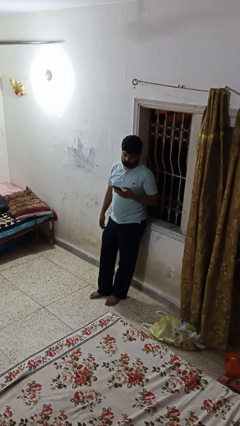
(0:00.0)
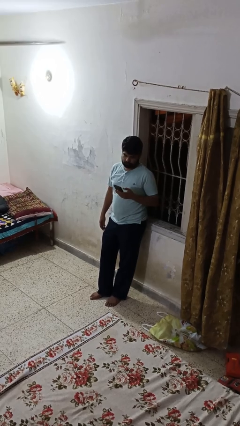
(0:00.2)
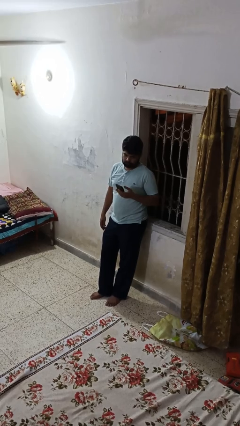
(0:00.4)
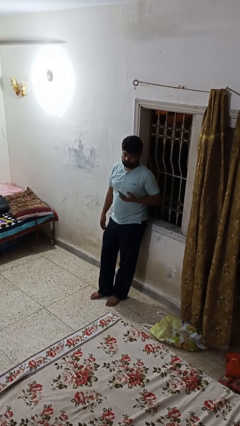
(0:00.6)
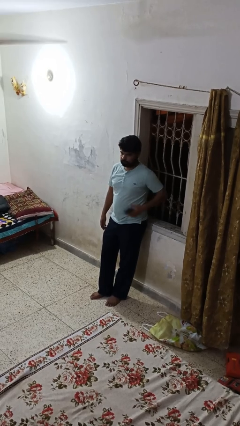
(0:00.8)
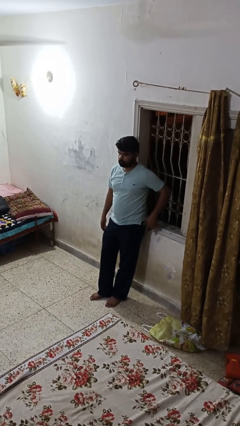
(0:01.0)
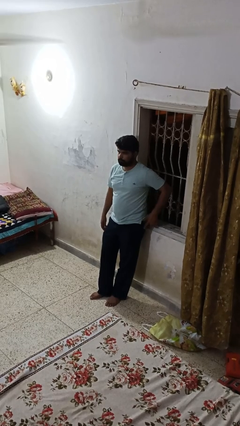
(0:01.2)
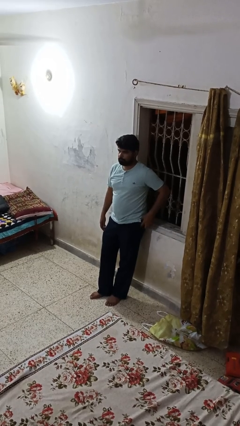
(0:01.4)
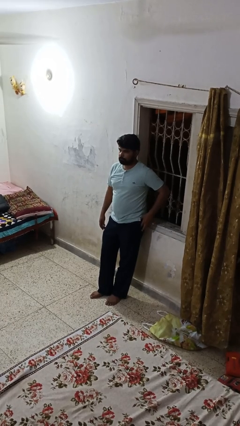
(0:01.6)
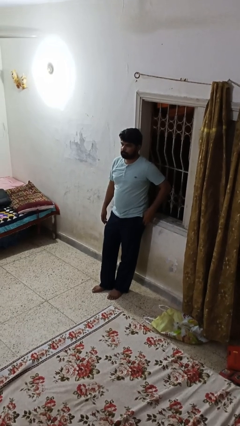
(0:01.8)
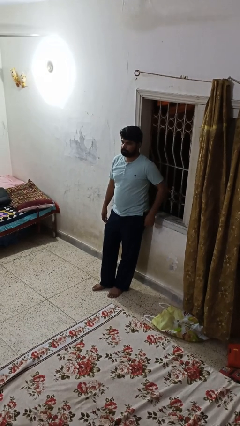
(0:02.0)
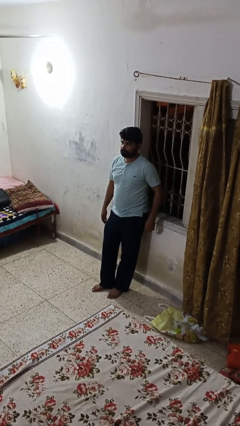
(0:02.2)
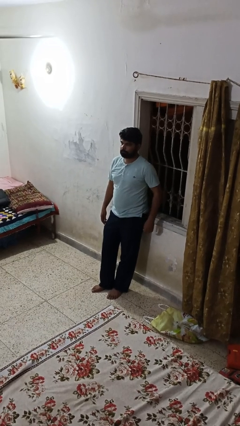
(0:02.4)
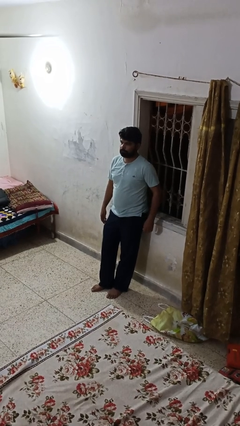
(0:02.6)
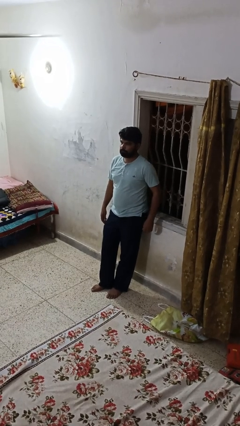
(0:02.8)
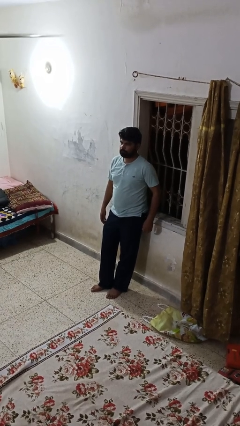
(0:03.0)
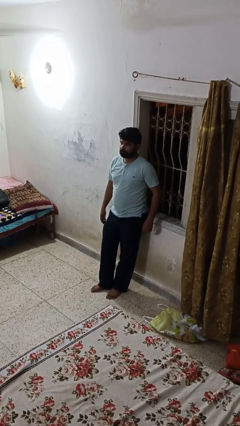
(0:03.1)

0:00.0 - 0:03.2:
person puts phone into pocket

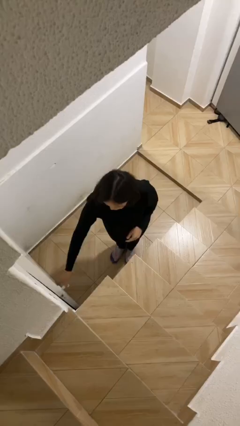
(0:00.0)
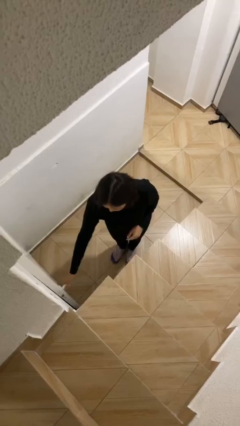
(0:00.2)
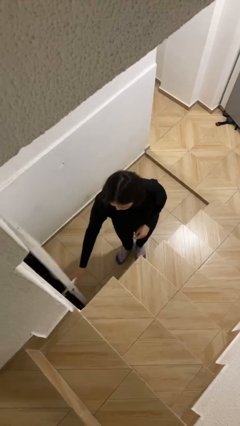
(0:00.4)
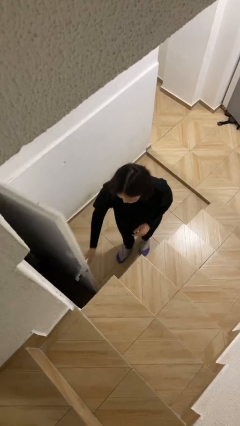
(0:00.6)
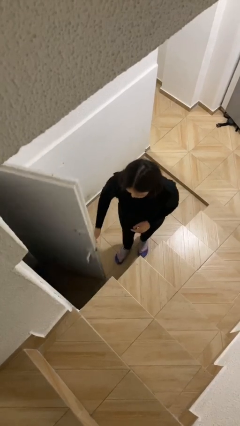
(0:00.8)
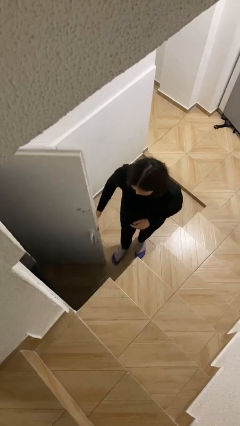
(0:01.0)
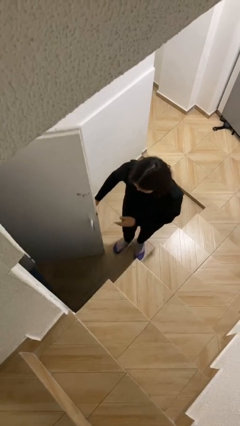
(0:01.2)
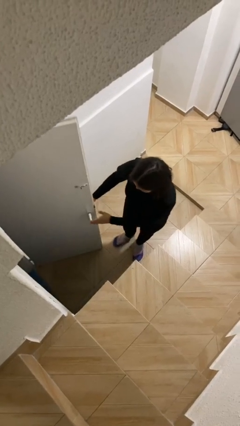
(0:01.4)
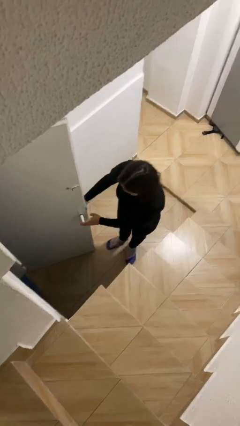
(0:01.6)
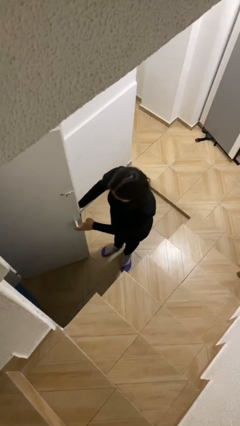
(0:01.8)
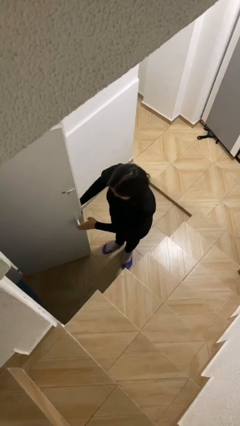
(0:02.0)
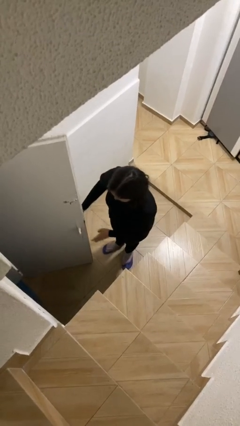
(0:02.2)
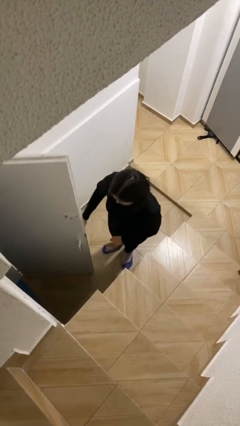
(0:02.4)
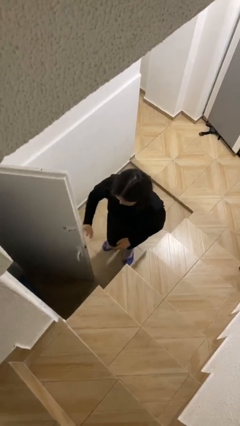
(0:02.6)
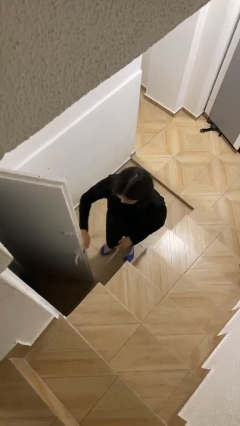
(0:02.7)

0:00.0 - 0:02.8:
person opens facility door

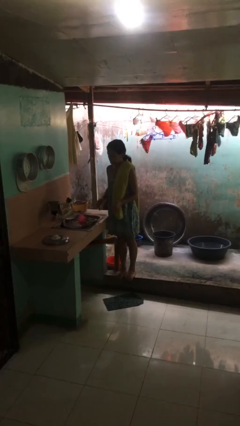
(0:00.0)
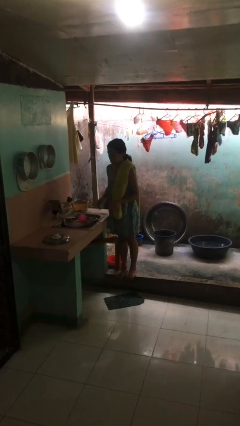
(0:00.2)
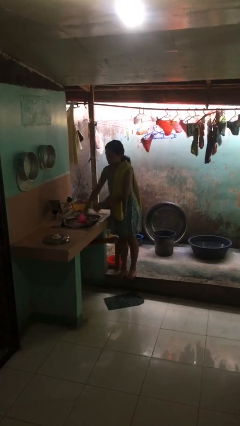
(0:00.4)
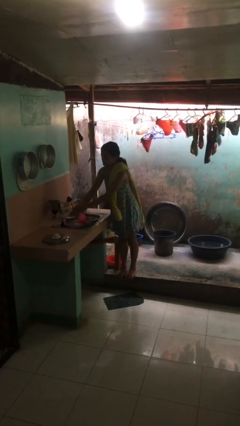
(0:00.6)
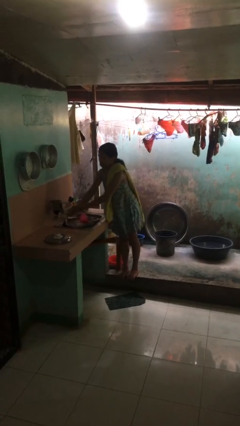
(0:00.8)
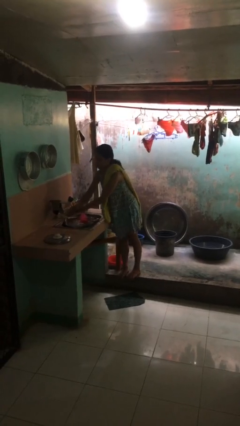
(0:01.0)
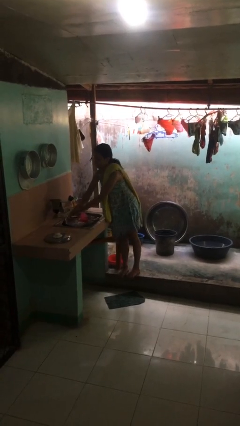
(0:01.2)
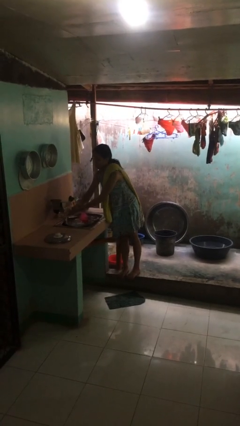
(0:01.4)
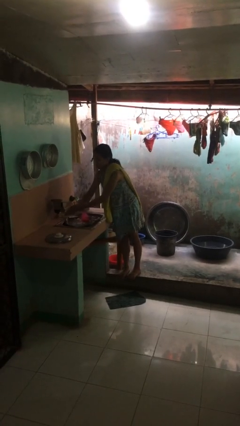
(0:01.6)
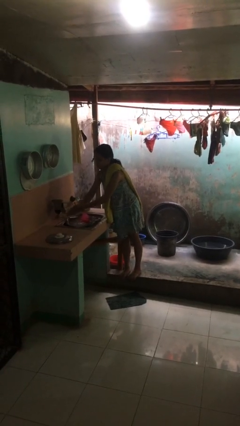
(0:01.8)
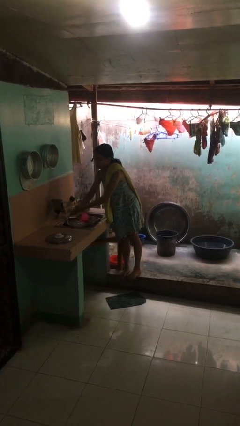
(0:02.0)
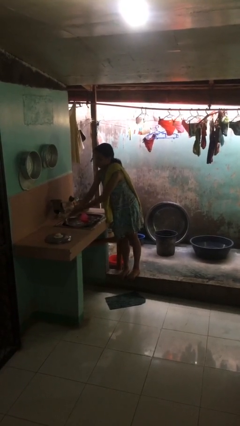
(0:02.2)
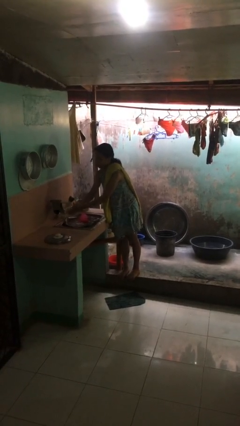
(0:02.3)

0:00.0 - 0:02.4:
person washes hands

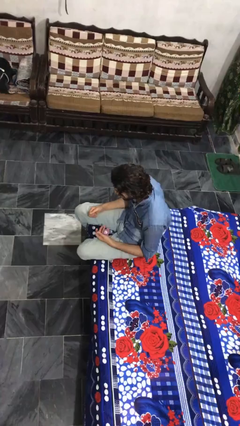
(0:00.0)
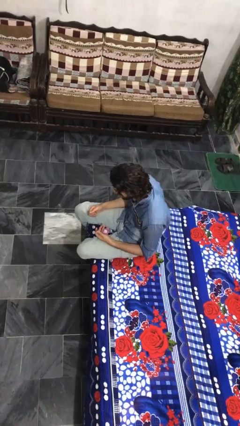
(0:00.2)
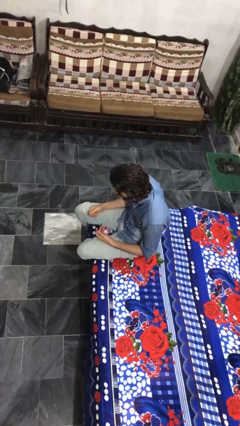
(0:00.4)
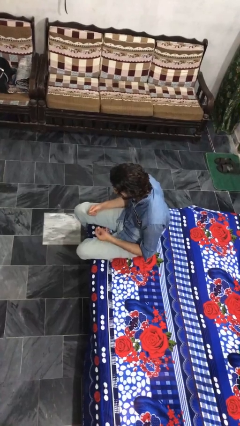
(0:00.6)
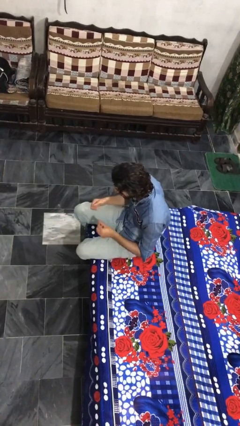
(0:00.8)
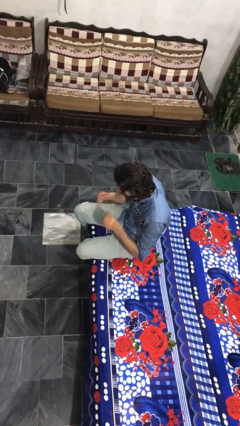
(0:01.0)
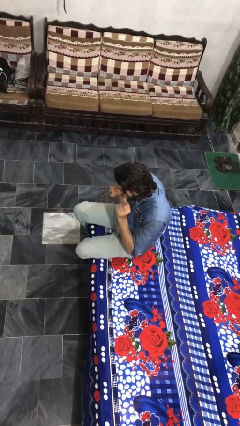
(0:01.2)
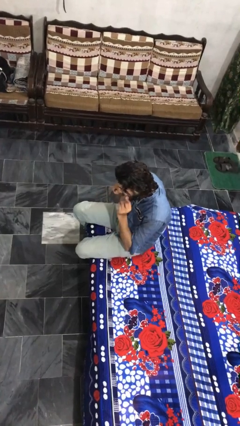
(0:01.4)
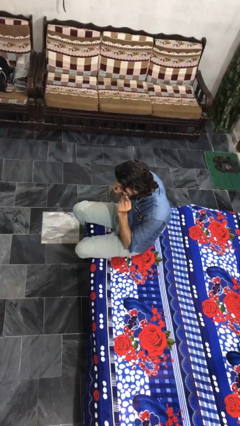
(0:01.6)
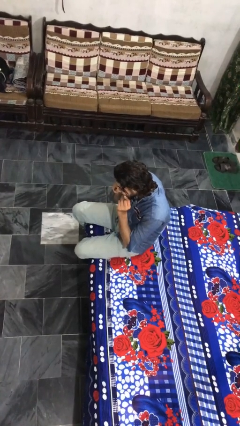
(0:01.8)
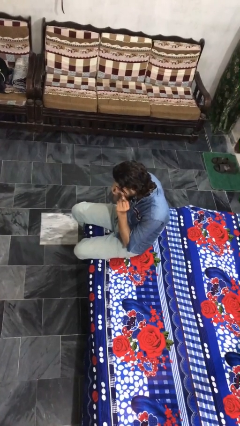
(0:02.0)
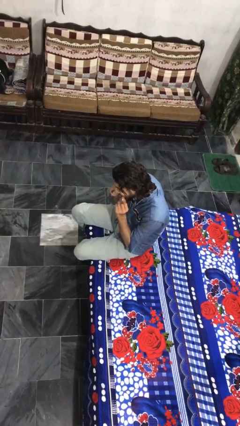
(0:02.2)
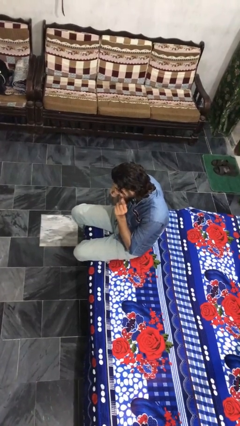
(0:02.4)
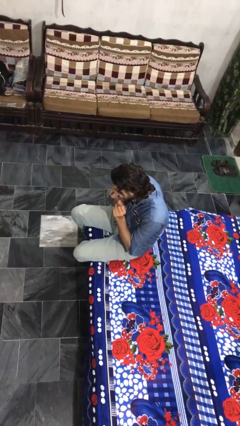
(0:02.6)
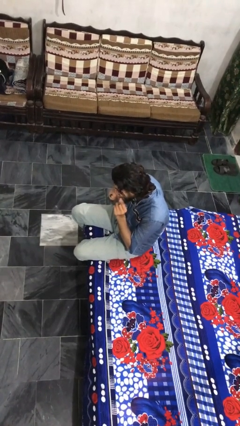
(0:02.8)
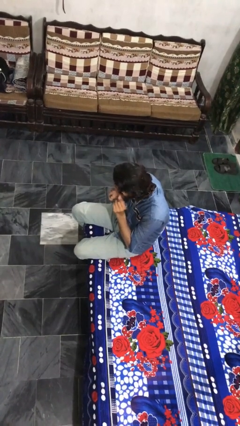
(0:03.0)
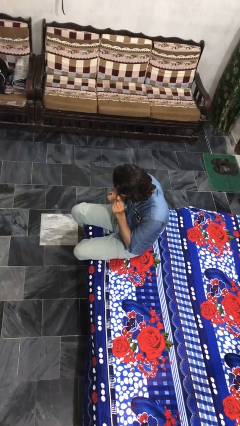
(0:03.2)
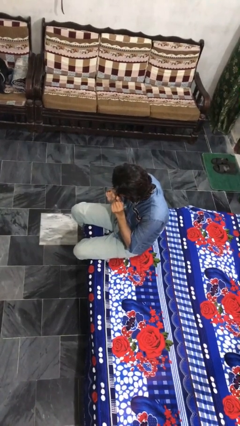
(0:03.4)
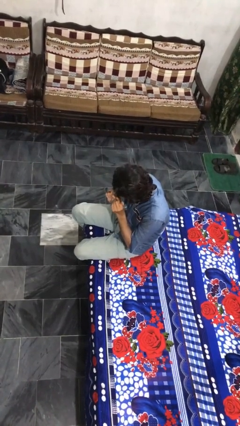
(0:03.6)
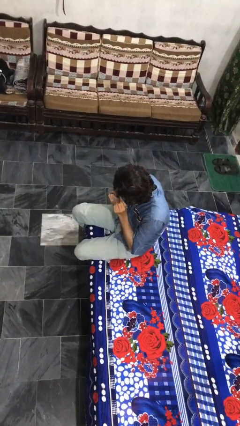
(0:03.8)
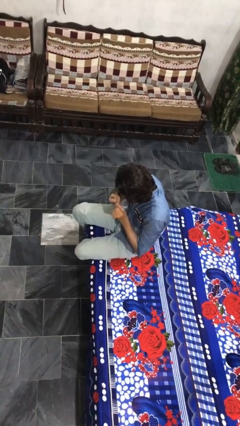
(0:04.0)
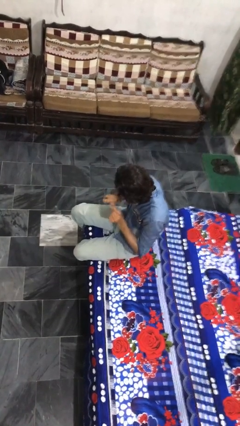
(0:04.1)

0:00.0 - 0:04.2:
person flosses

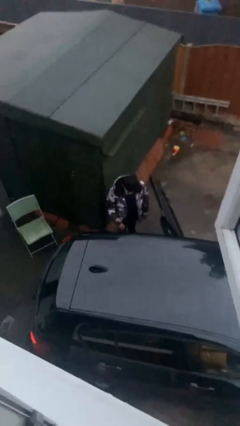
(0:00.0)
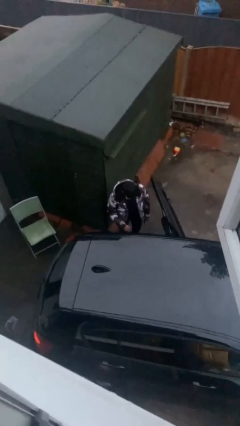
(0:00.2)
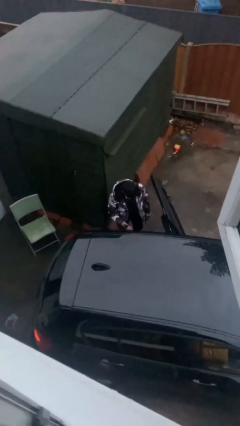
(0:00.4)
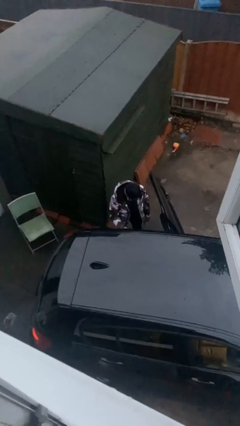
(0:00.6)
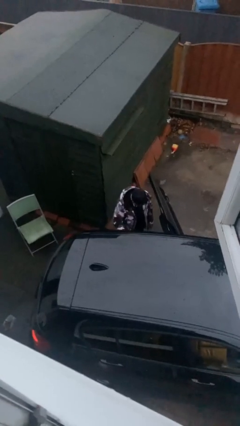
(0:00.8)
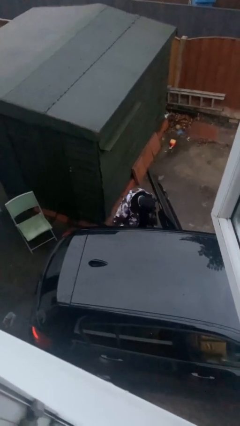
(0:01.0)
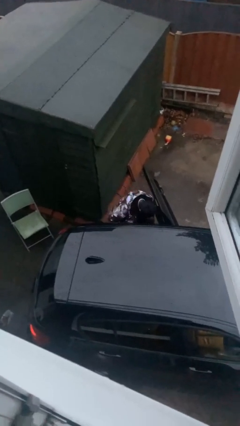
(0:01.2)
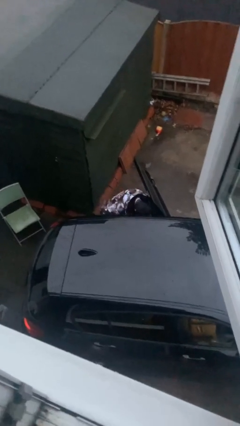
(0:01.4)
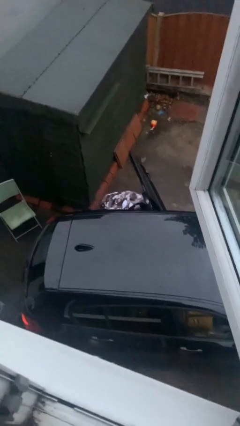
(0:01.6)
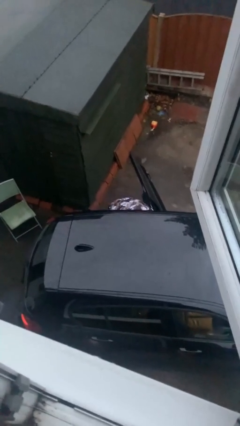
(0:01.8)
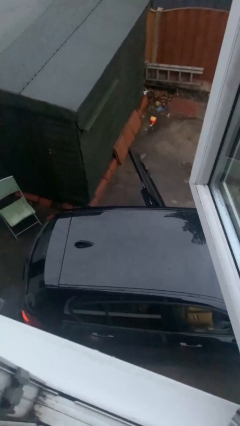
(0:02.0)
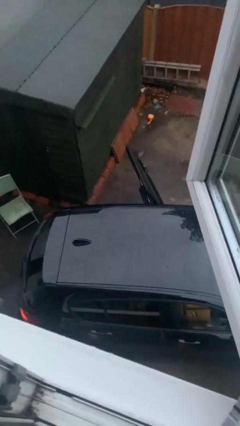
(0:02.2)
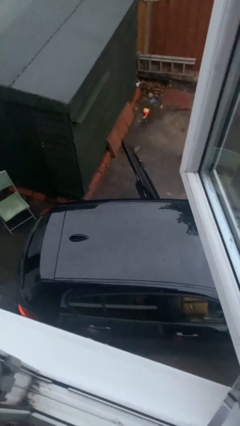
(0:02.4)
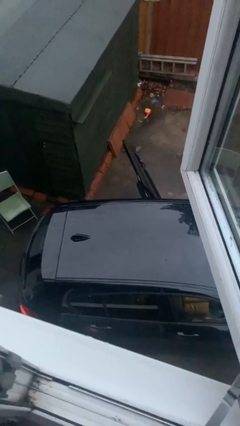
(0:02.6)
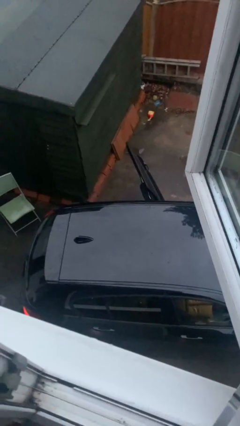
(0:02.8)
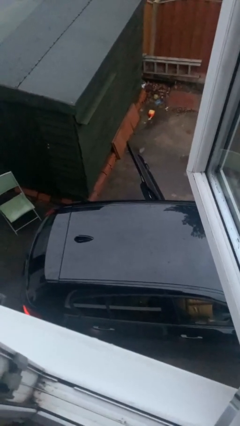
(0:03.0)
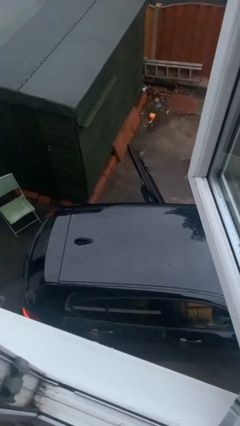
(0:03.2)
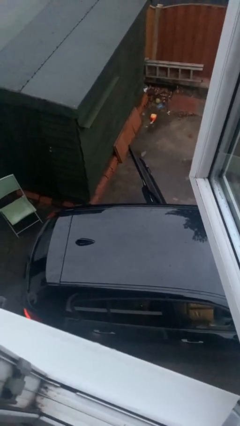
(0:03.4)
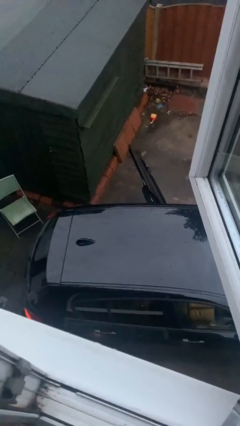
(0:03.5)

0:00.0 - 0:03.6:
person enters car

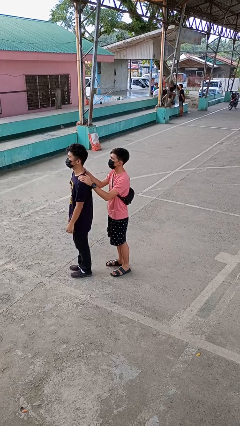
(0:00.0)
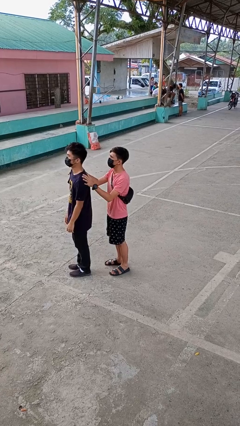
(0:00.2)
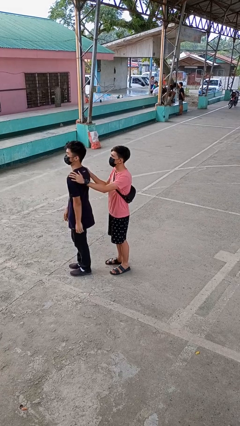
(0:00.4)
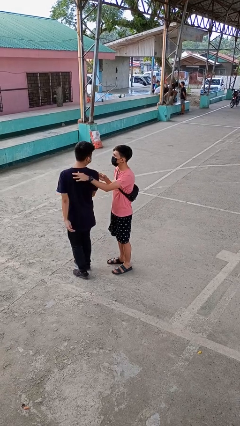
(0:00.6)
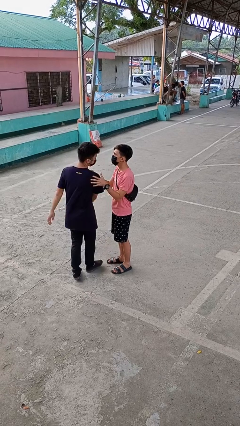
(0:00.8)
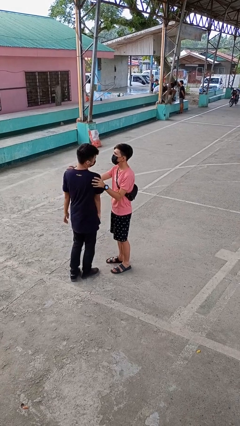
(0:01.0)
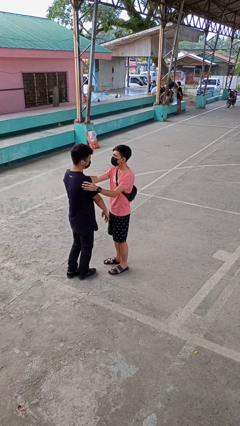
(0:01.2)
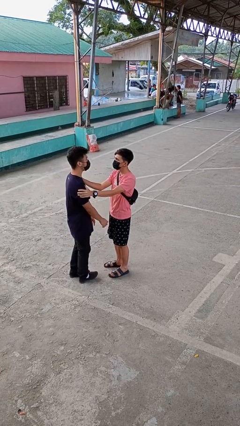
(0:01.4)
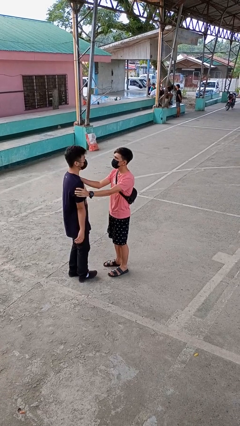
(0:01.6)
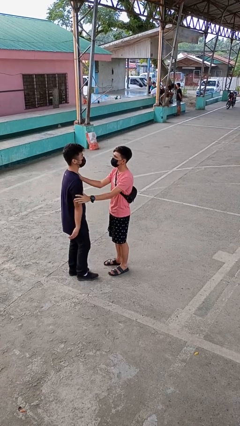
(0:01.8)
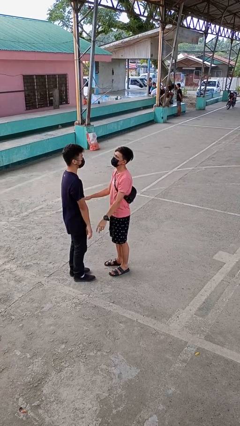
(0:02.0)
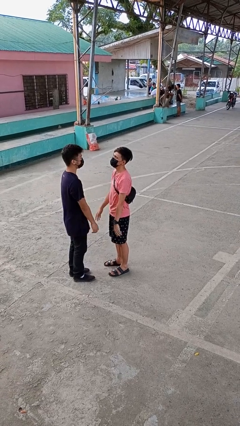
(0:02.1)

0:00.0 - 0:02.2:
person spins person around
